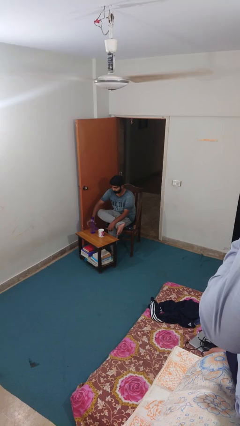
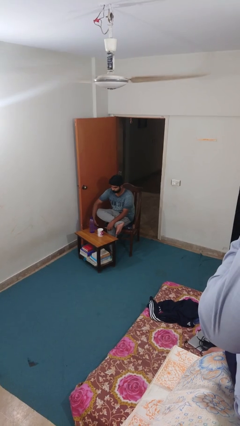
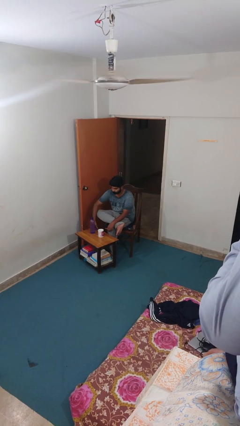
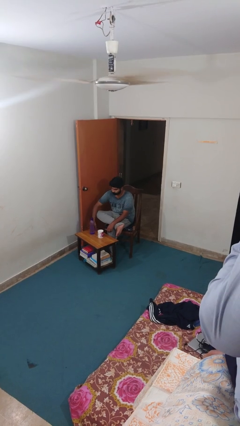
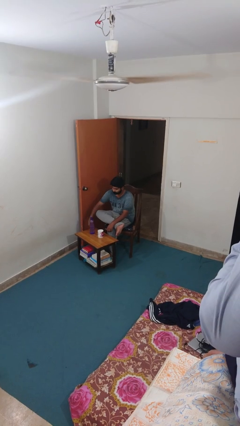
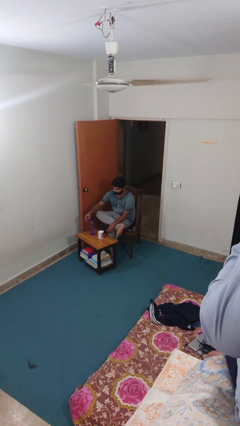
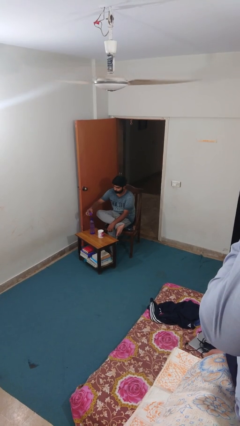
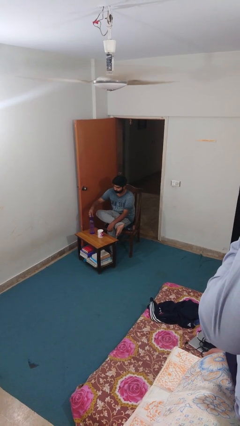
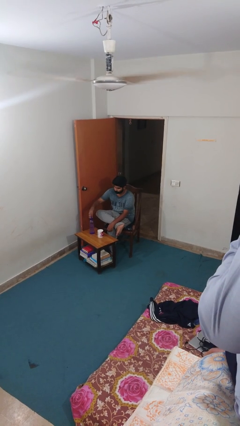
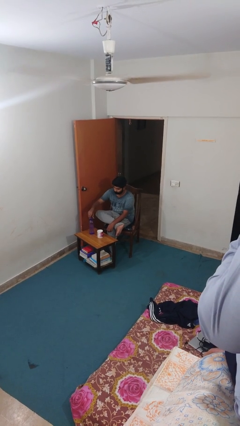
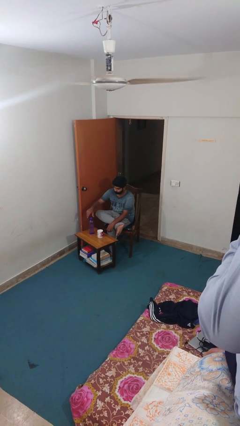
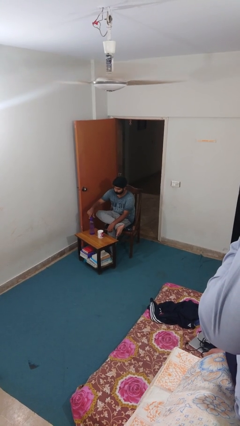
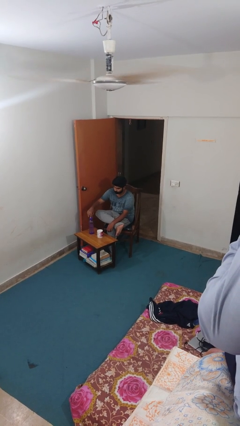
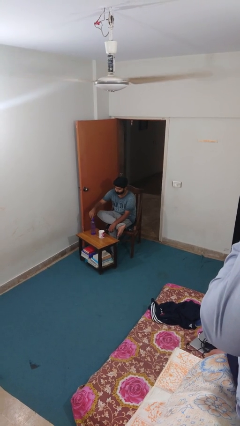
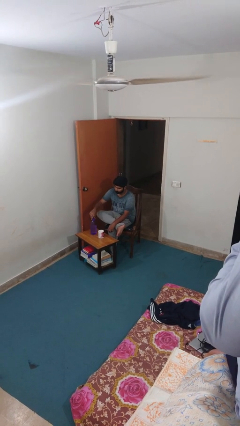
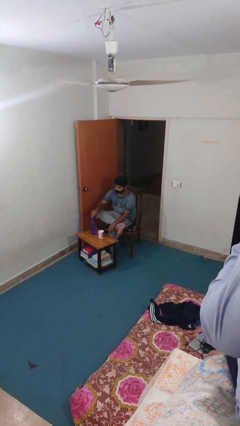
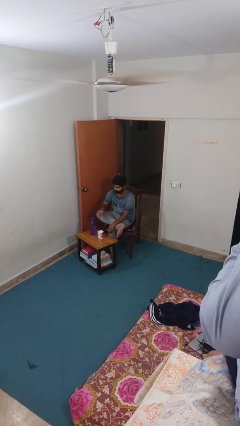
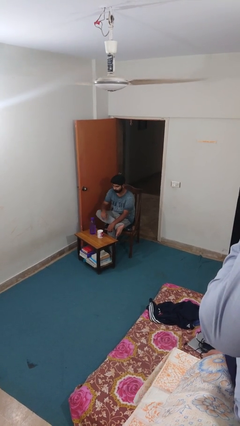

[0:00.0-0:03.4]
person screws lid to bottle

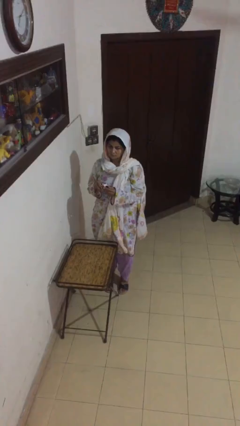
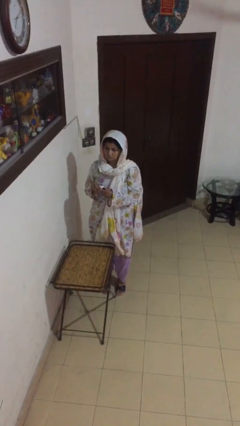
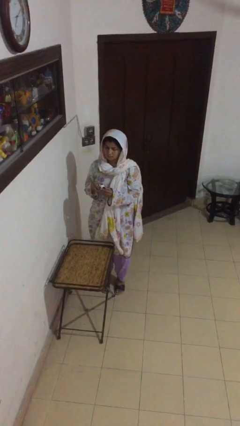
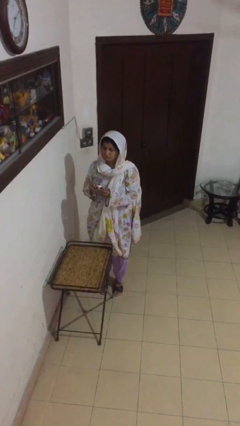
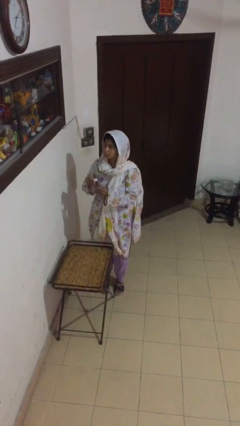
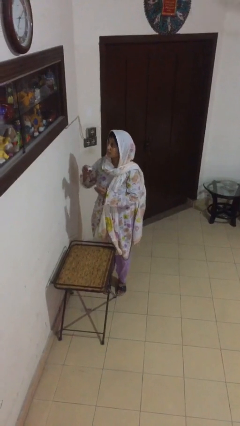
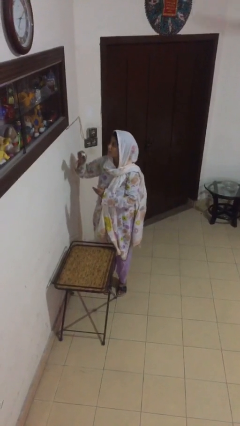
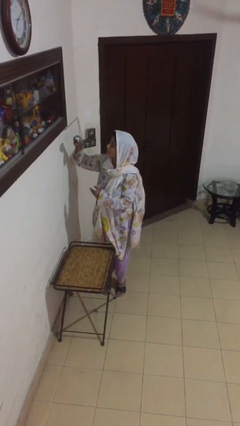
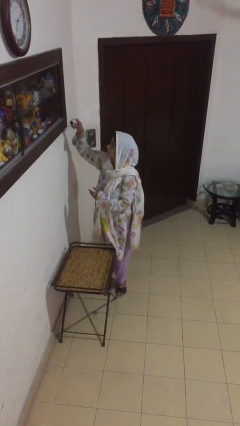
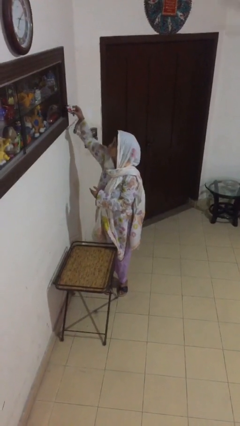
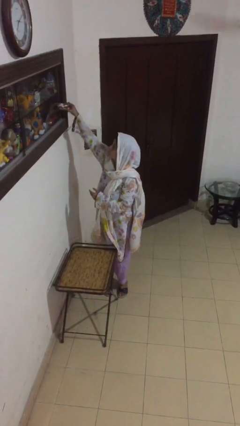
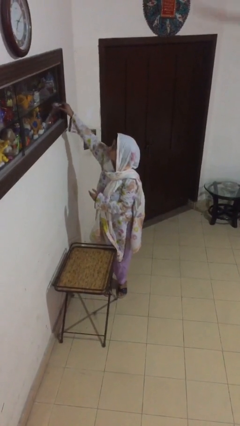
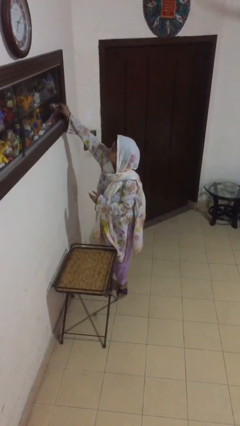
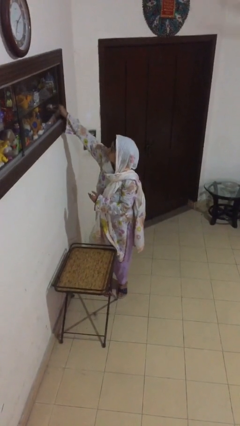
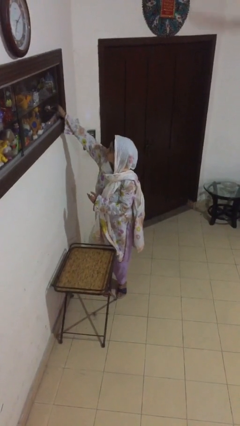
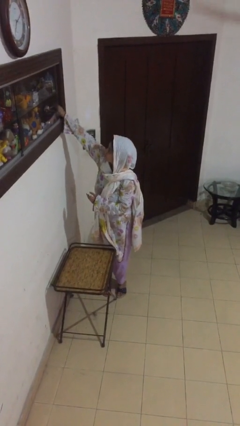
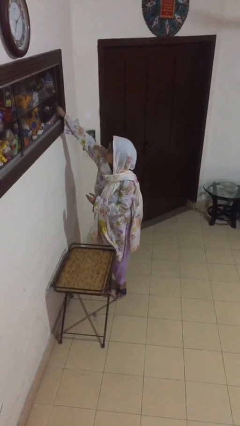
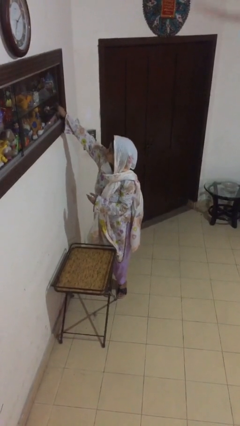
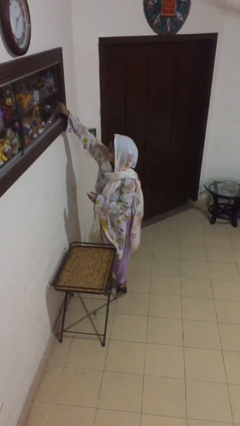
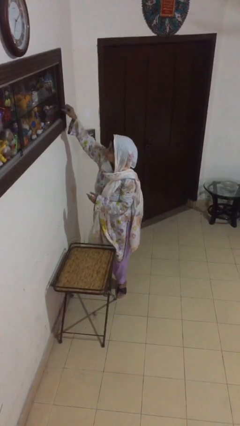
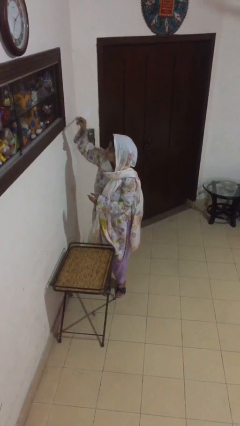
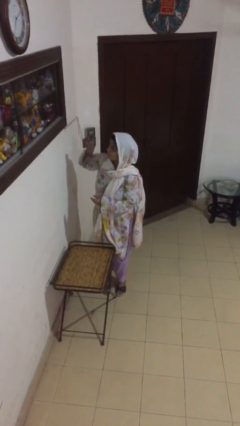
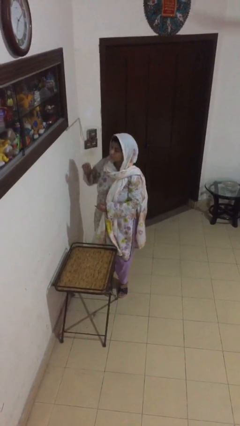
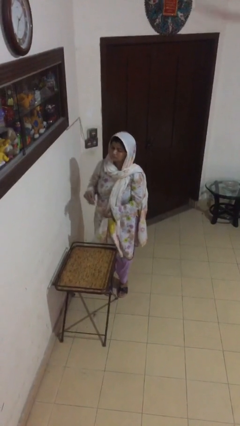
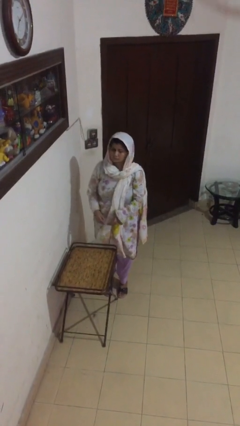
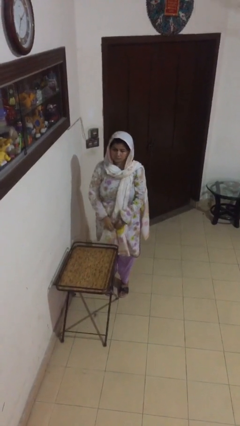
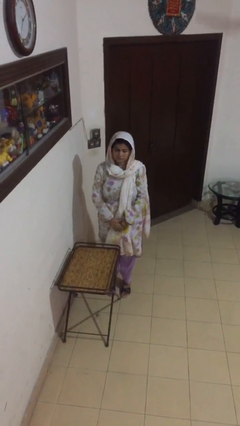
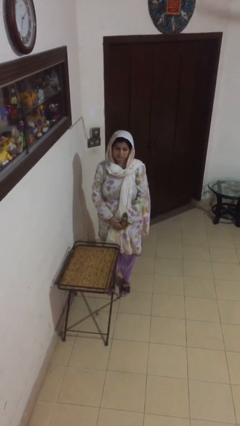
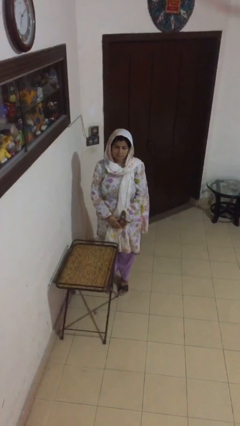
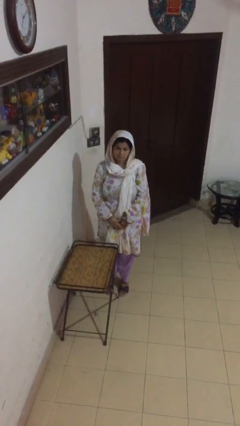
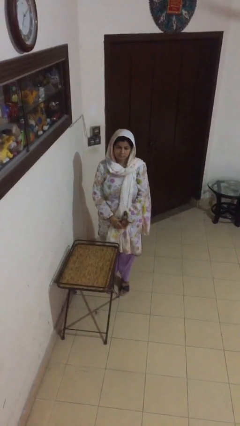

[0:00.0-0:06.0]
person puts down object on shelf

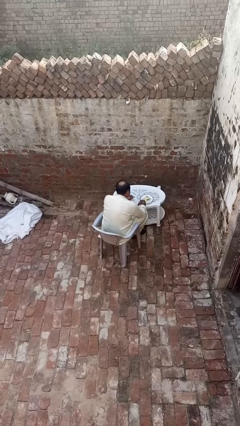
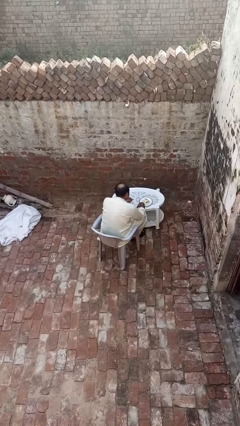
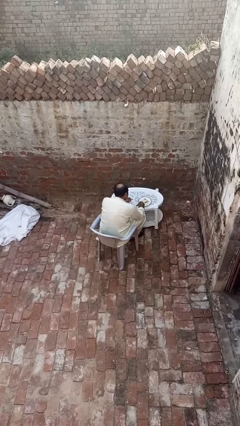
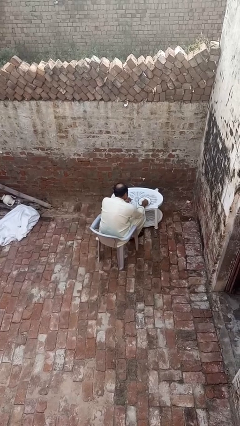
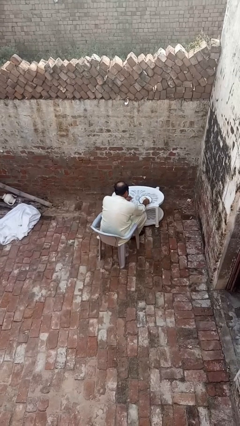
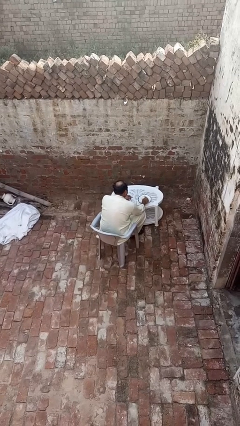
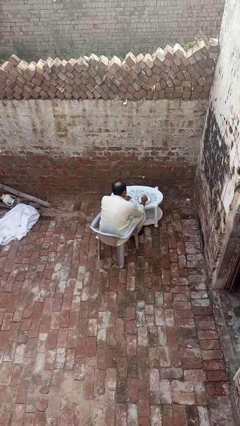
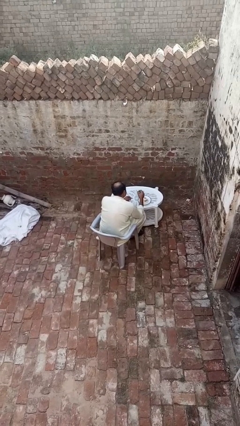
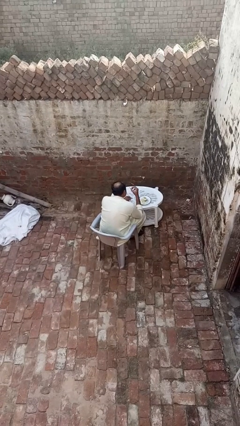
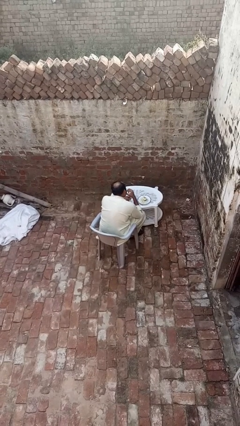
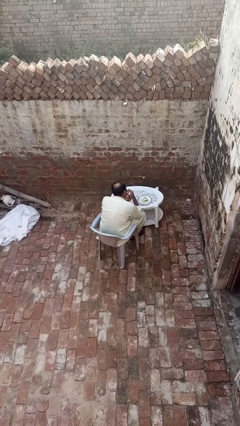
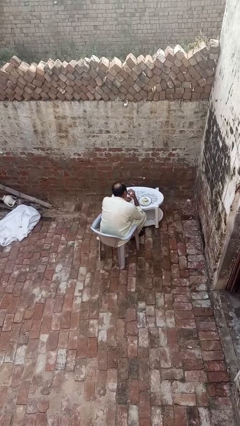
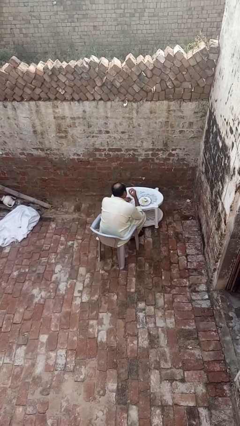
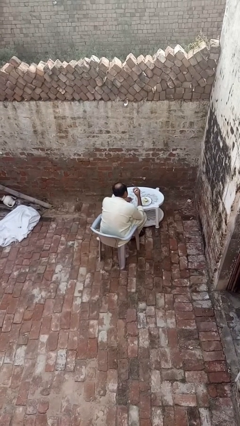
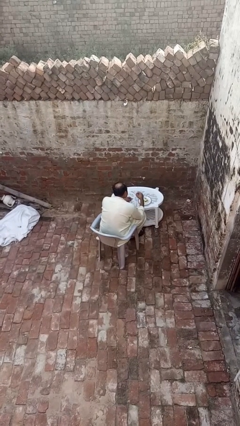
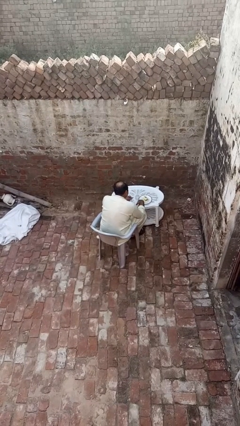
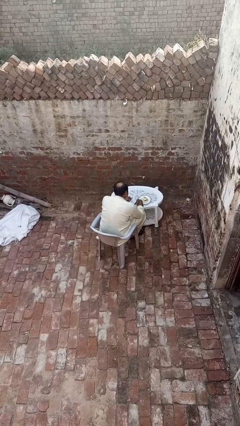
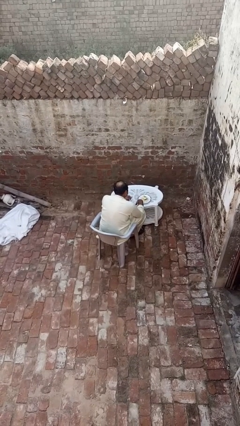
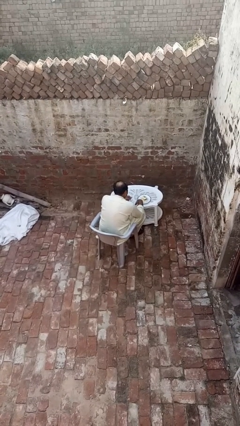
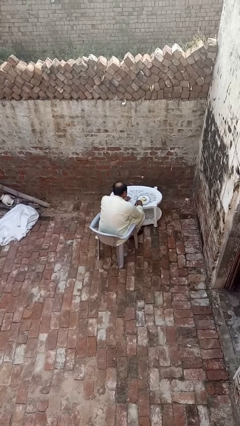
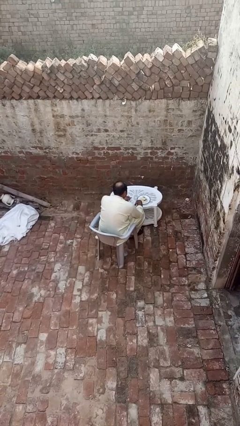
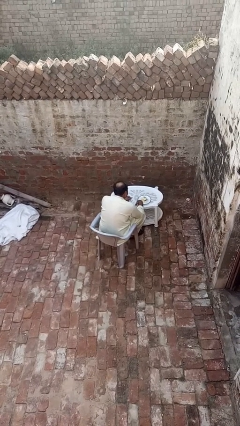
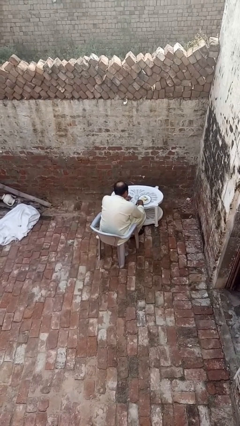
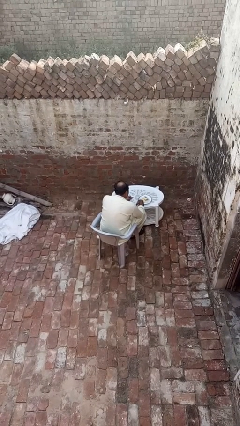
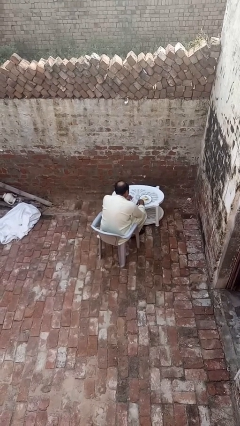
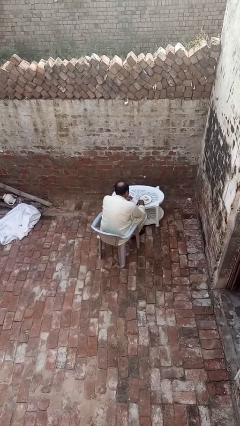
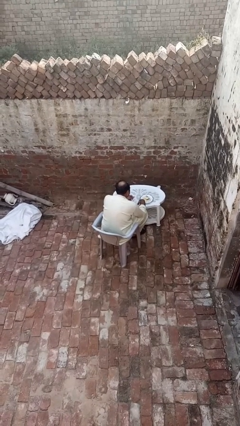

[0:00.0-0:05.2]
person eats with hands

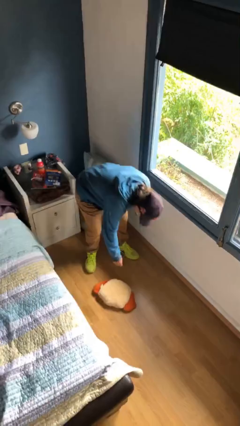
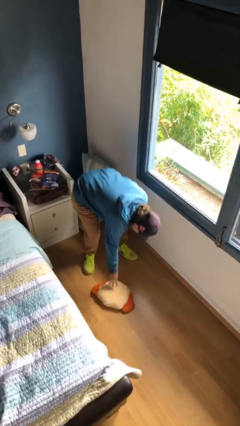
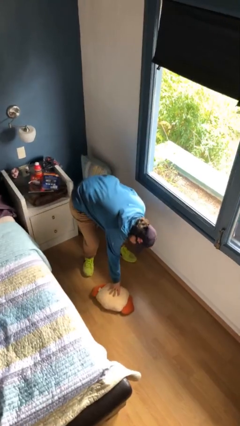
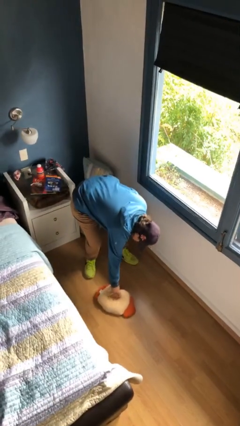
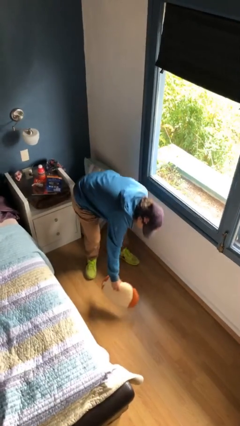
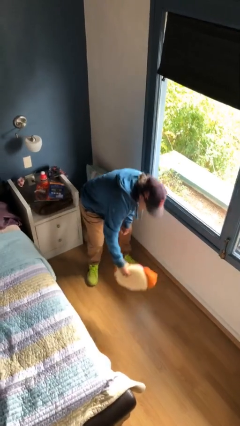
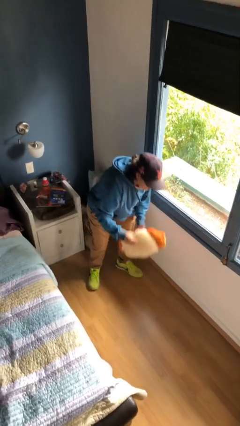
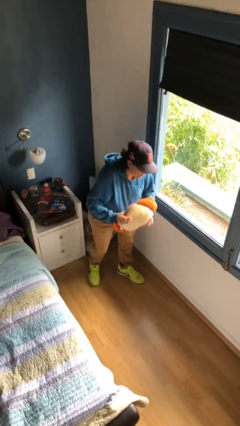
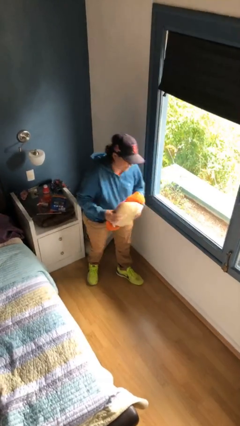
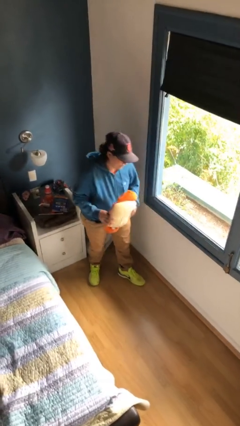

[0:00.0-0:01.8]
person picks up object from floor

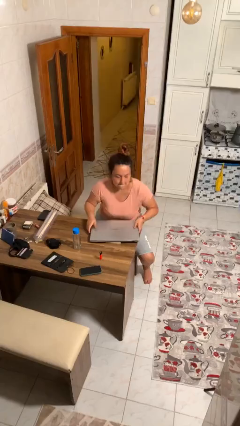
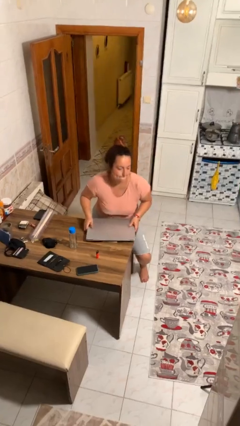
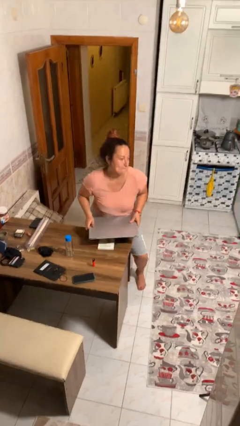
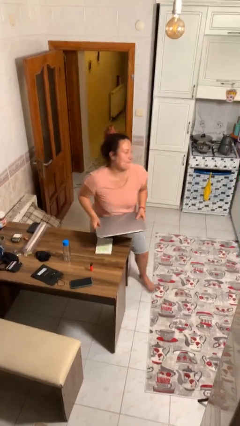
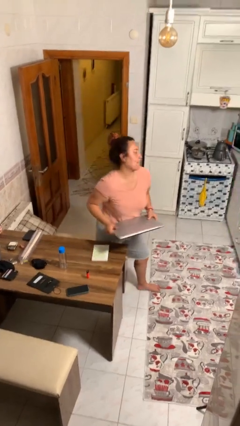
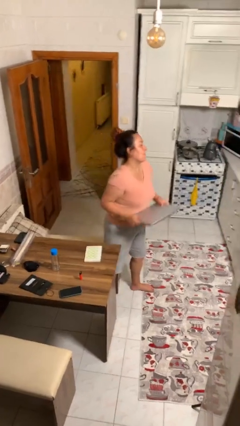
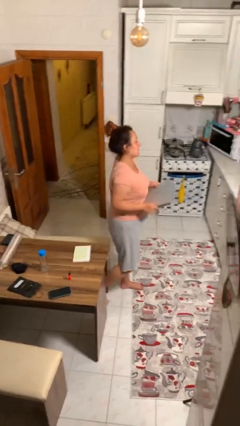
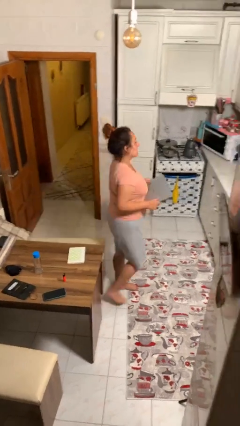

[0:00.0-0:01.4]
person stands up
